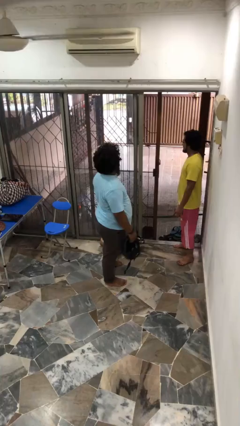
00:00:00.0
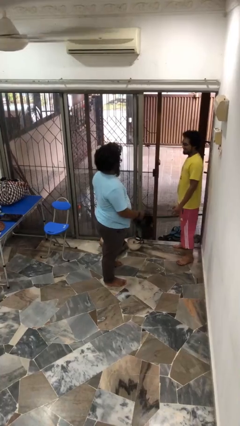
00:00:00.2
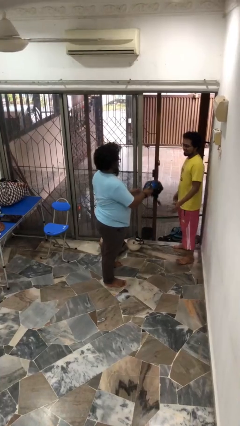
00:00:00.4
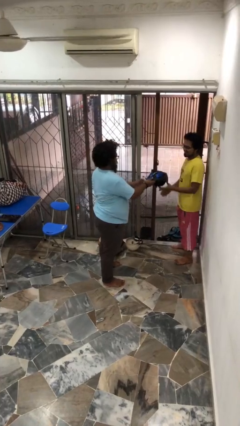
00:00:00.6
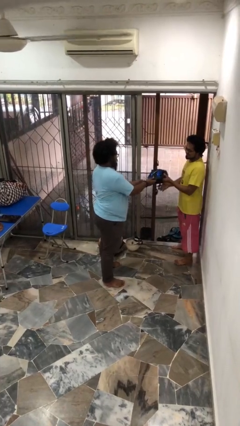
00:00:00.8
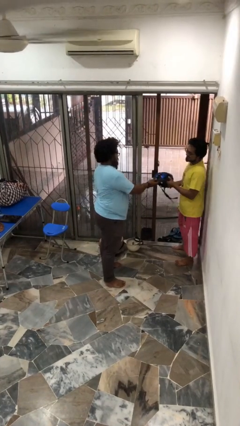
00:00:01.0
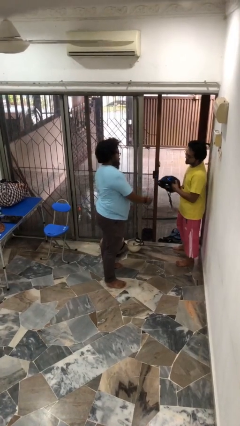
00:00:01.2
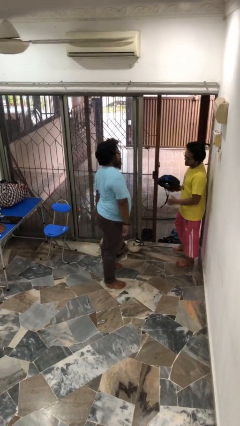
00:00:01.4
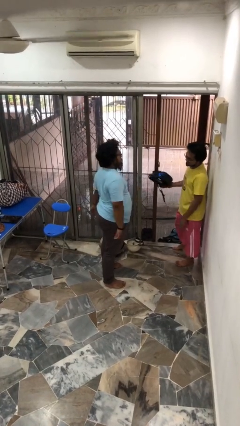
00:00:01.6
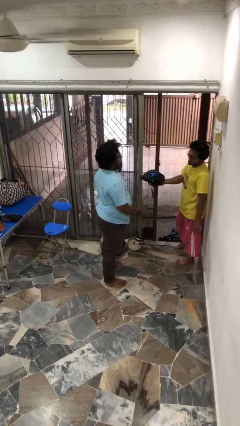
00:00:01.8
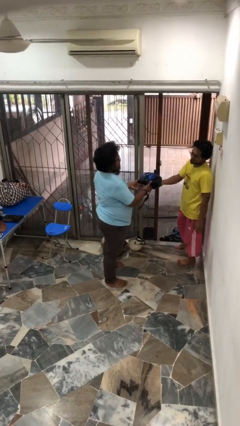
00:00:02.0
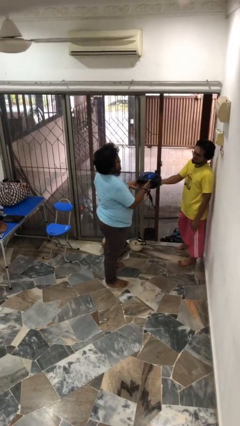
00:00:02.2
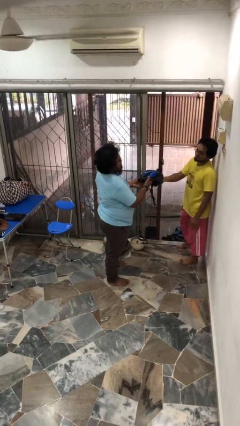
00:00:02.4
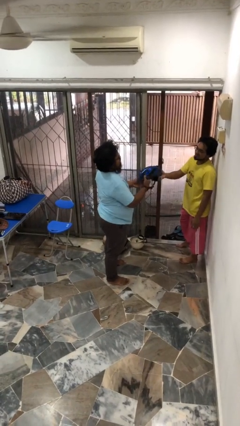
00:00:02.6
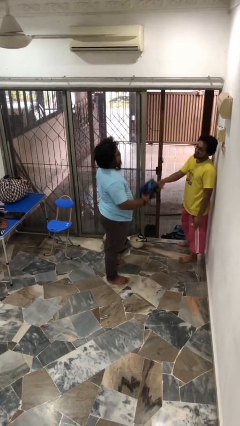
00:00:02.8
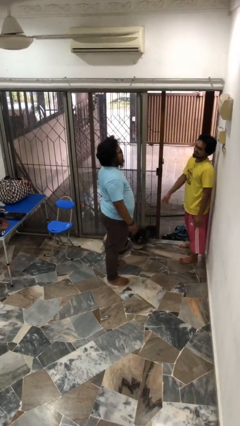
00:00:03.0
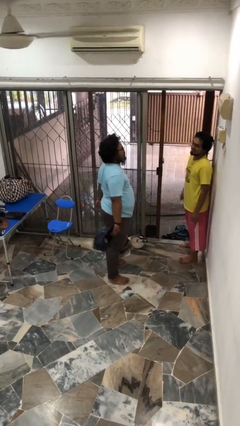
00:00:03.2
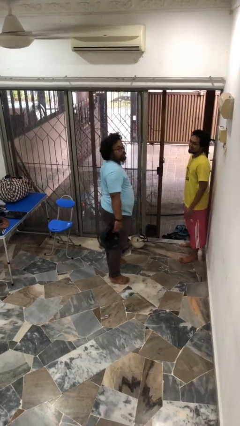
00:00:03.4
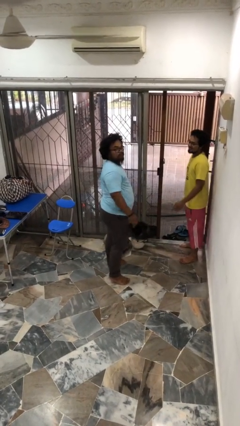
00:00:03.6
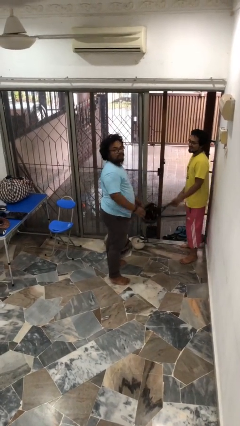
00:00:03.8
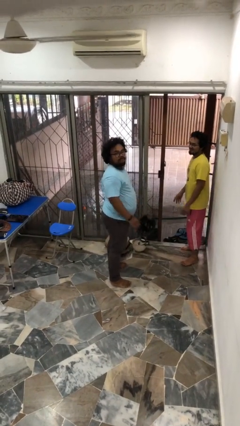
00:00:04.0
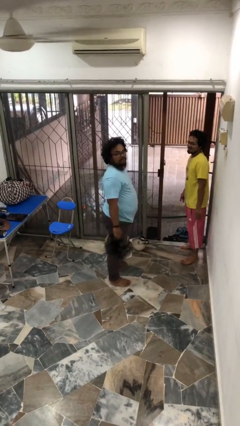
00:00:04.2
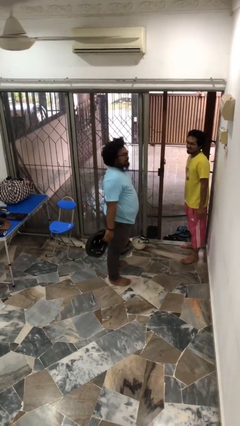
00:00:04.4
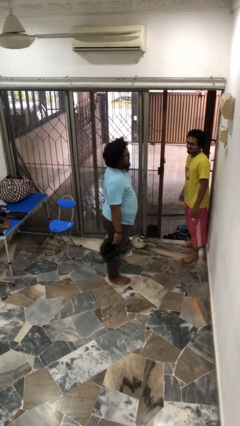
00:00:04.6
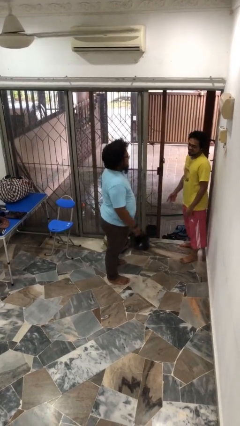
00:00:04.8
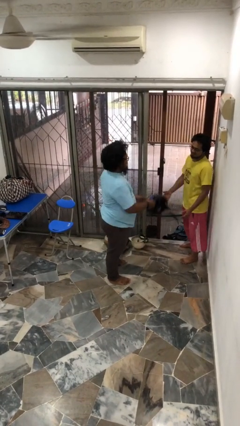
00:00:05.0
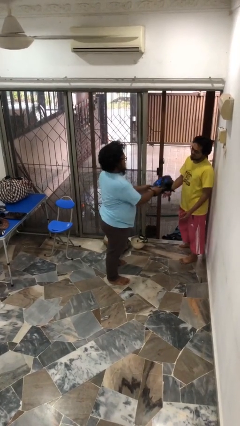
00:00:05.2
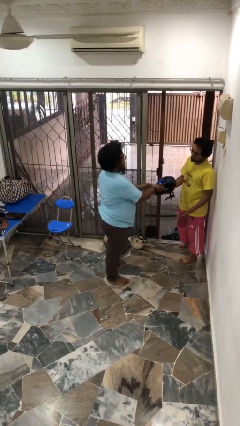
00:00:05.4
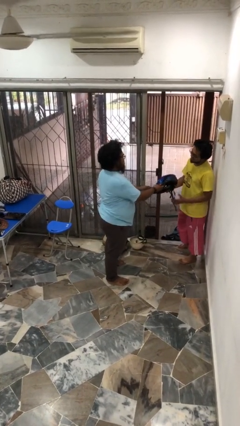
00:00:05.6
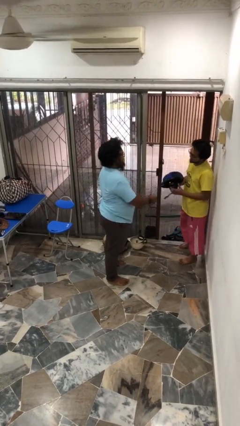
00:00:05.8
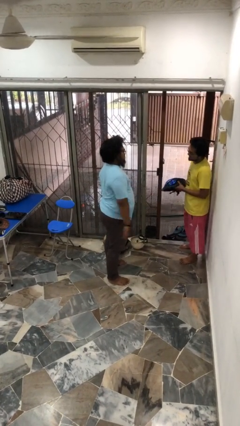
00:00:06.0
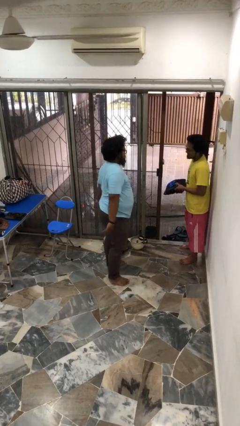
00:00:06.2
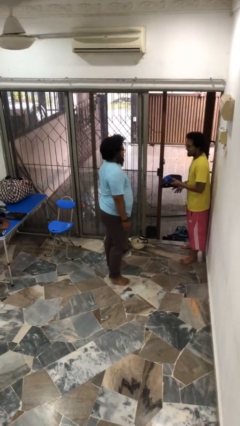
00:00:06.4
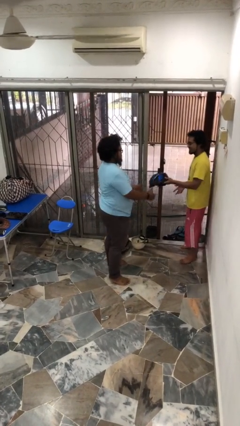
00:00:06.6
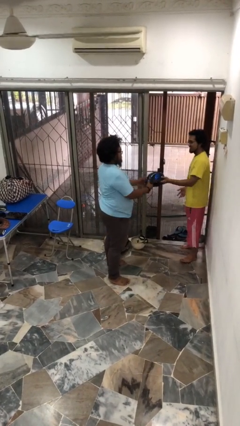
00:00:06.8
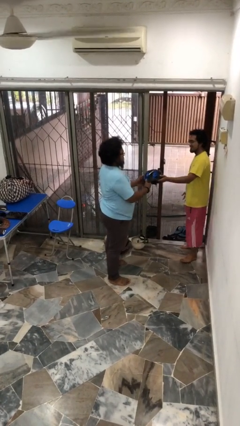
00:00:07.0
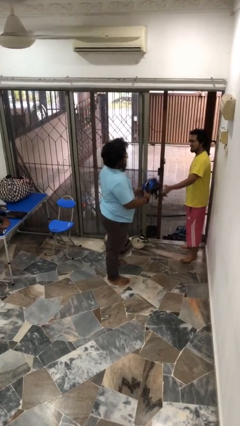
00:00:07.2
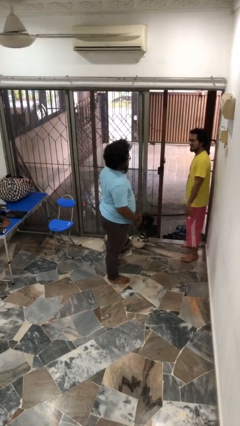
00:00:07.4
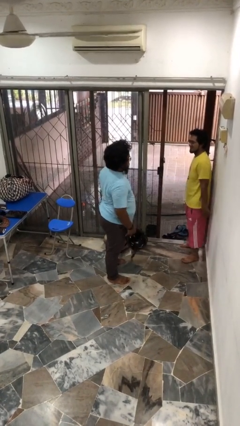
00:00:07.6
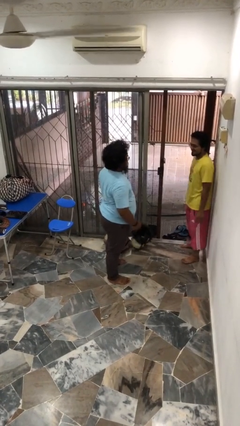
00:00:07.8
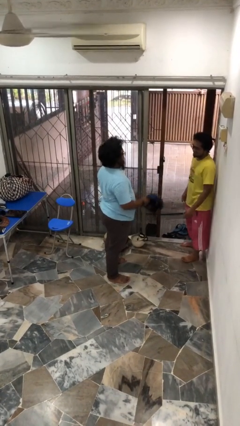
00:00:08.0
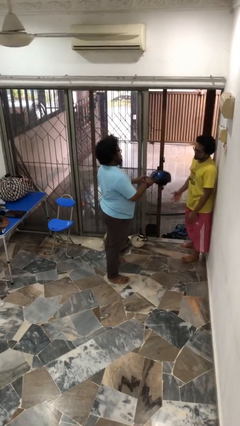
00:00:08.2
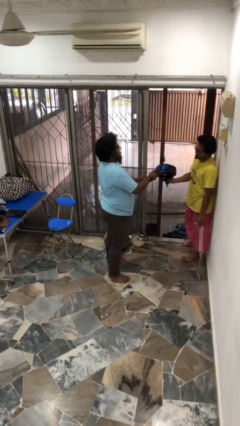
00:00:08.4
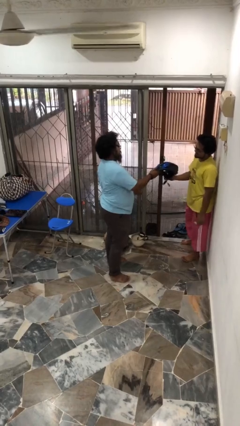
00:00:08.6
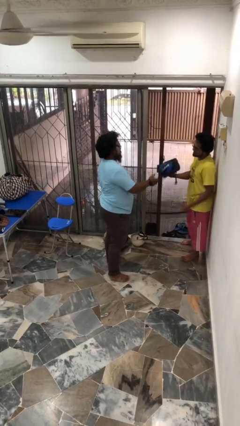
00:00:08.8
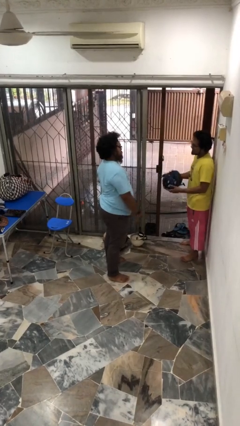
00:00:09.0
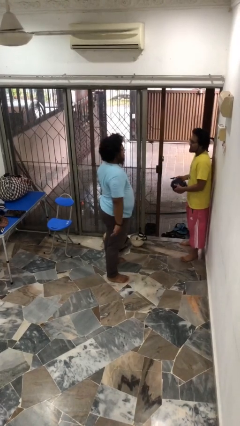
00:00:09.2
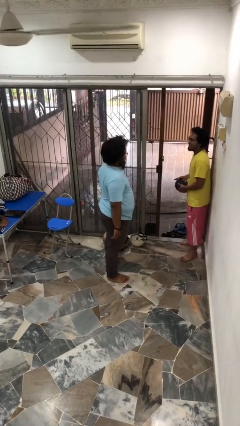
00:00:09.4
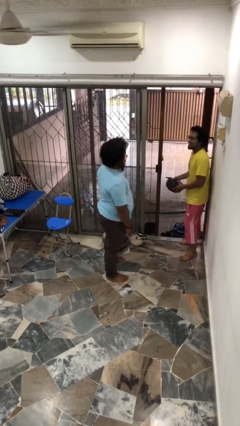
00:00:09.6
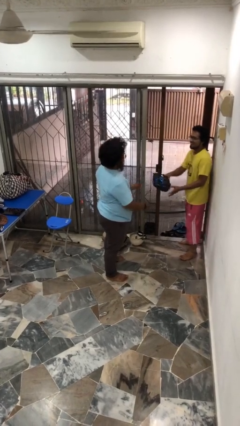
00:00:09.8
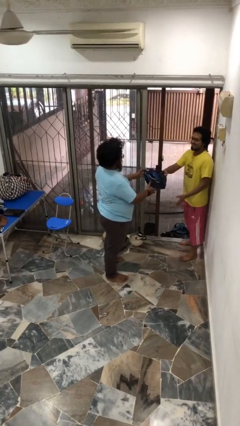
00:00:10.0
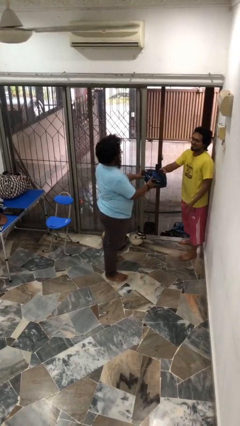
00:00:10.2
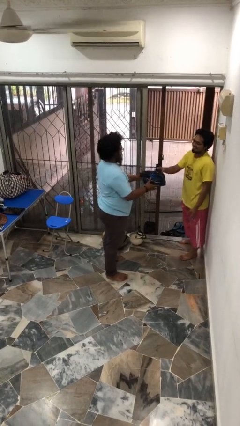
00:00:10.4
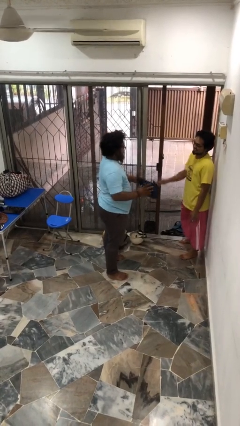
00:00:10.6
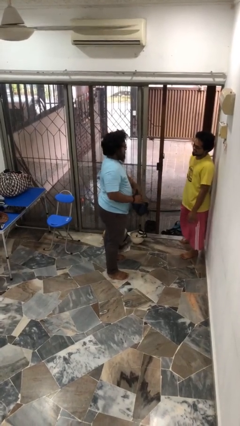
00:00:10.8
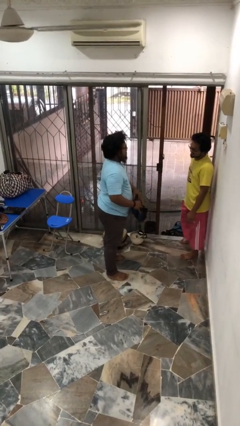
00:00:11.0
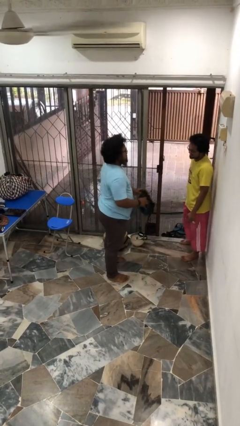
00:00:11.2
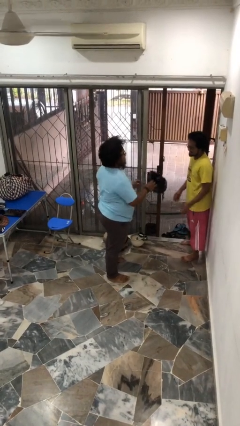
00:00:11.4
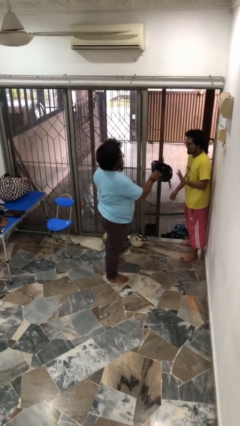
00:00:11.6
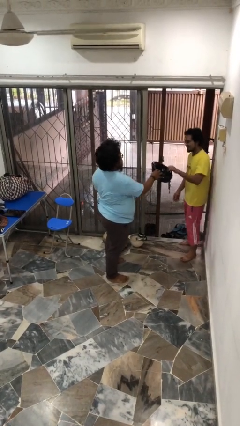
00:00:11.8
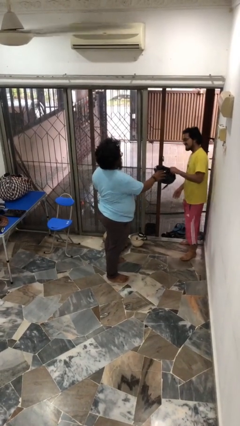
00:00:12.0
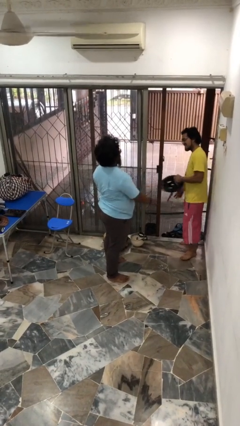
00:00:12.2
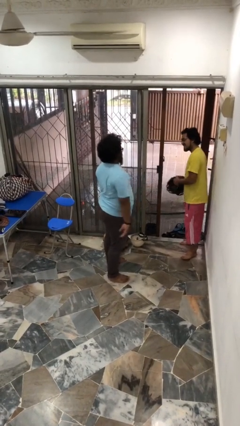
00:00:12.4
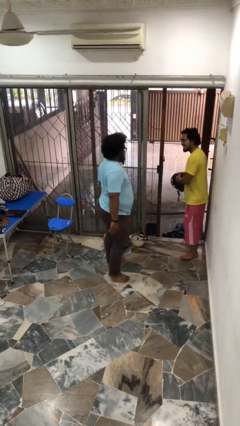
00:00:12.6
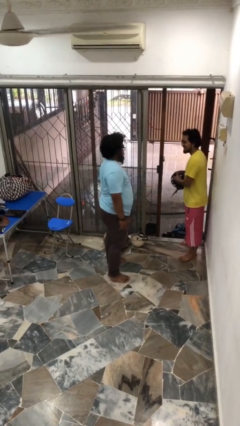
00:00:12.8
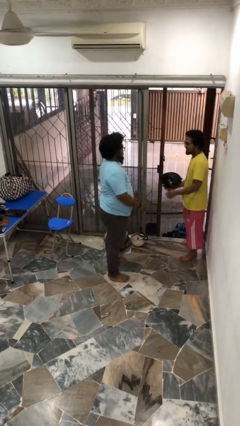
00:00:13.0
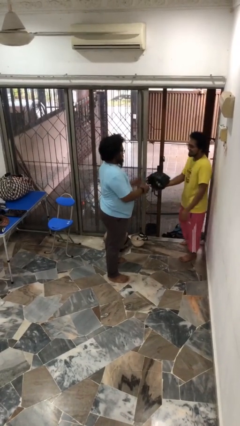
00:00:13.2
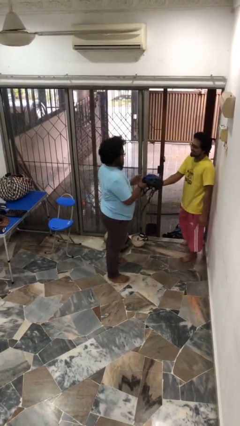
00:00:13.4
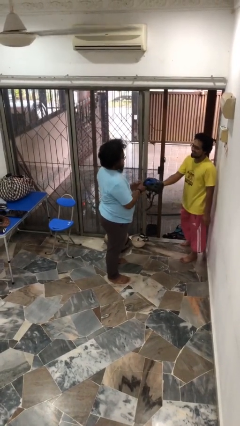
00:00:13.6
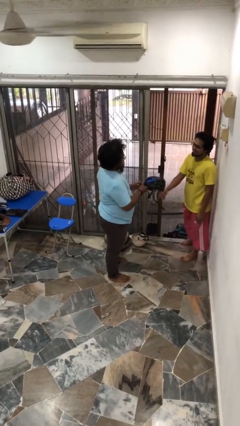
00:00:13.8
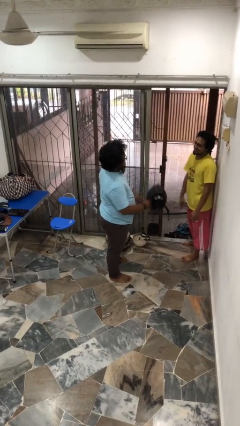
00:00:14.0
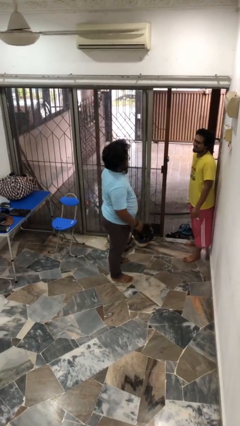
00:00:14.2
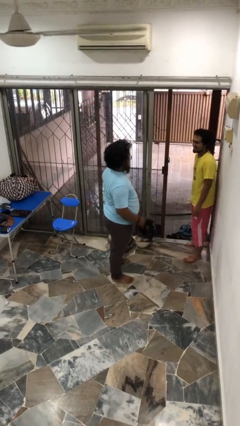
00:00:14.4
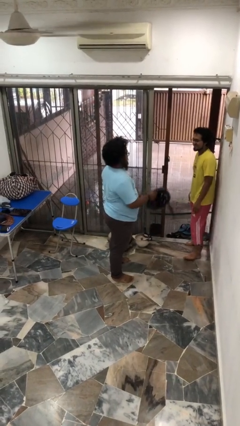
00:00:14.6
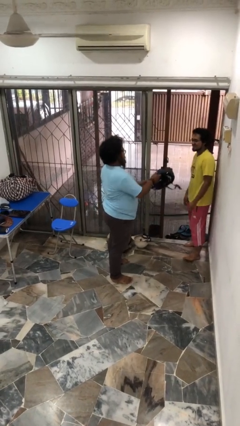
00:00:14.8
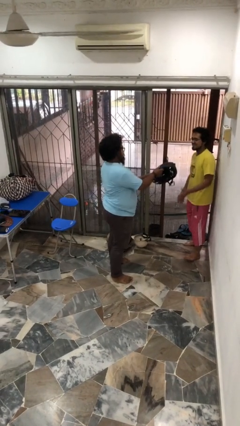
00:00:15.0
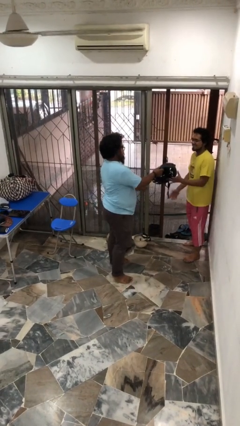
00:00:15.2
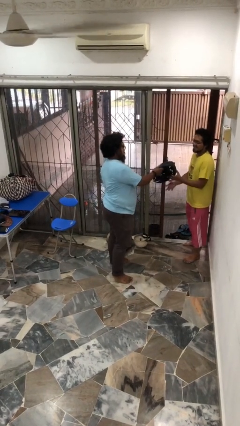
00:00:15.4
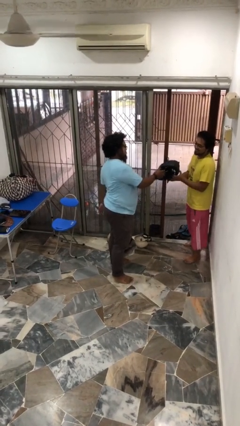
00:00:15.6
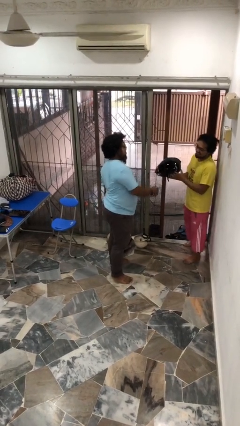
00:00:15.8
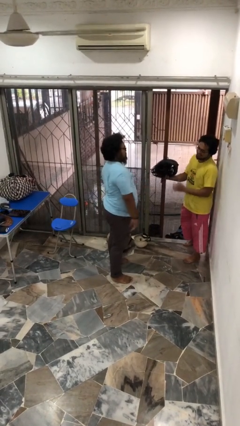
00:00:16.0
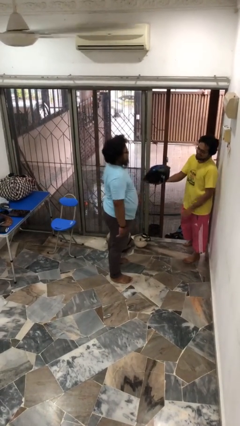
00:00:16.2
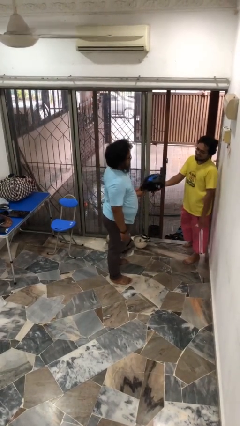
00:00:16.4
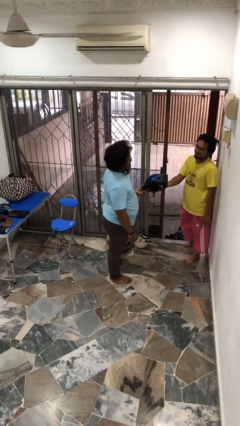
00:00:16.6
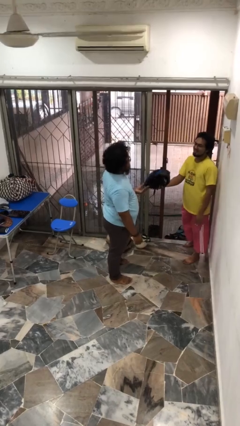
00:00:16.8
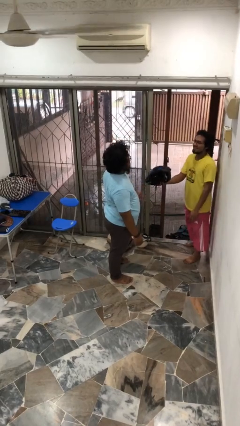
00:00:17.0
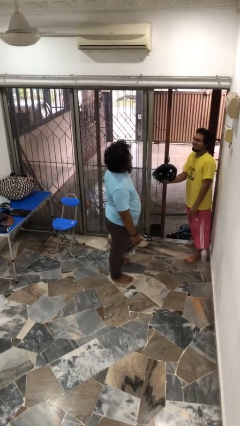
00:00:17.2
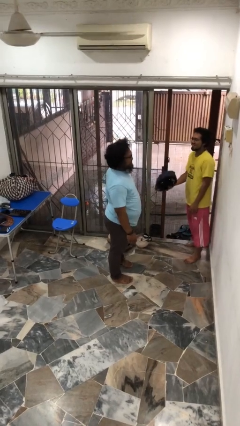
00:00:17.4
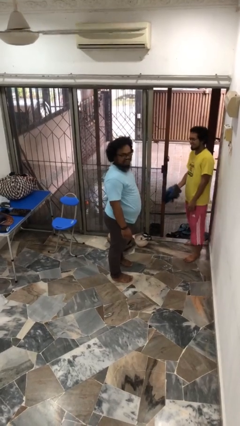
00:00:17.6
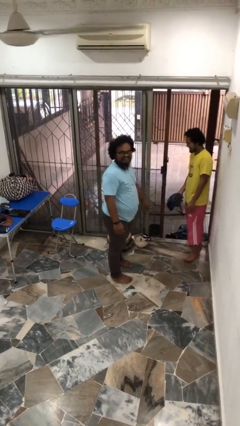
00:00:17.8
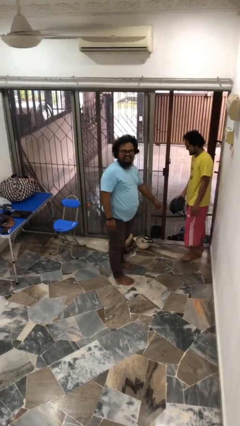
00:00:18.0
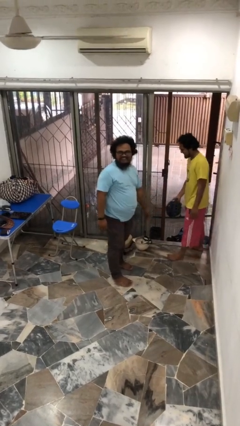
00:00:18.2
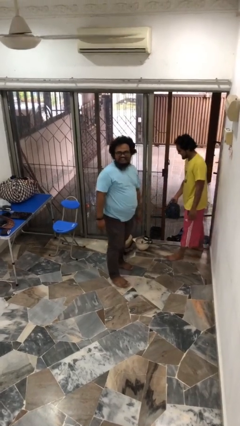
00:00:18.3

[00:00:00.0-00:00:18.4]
person transfers object to person
